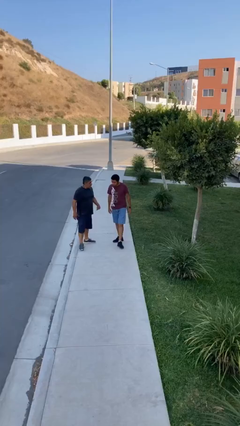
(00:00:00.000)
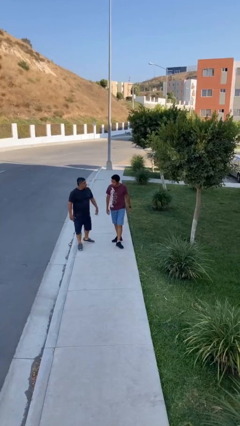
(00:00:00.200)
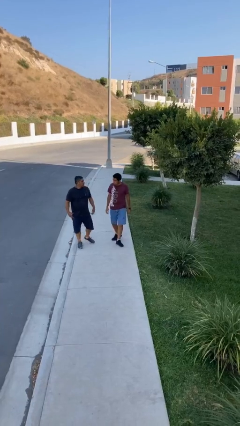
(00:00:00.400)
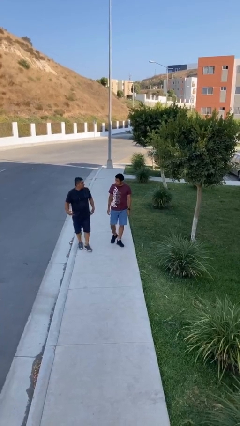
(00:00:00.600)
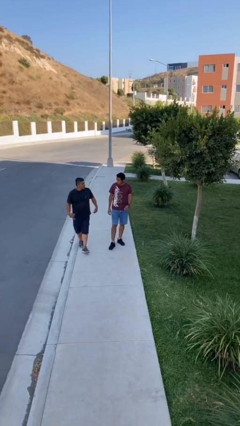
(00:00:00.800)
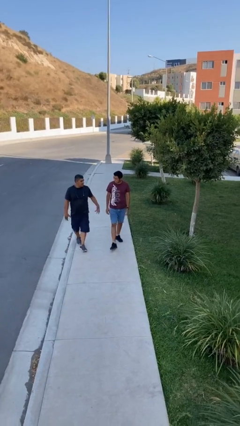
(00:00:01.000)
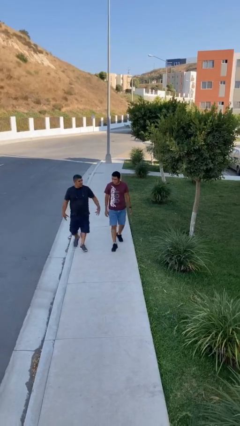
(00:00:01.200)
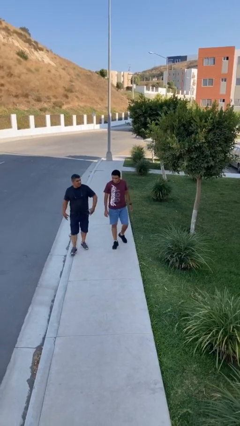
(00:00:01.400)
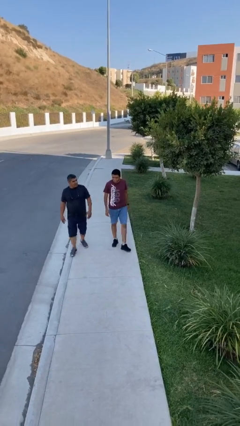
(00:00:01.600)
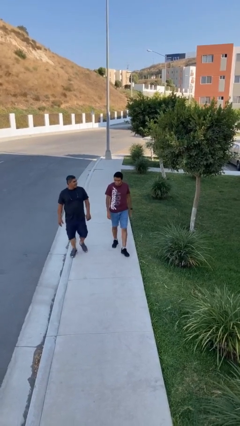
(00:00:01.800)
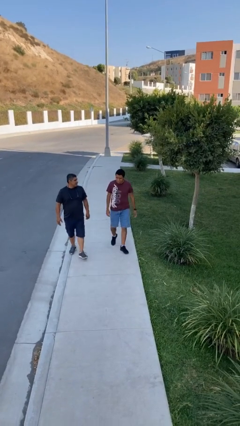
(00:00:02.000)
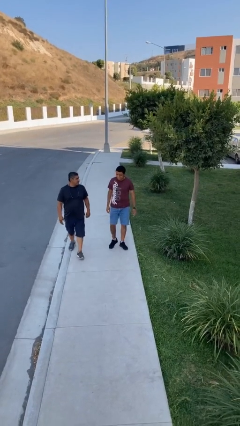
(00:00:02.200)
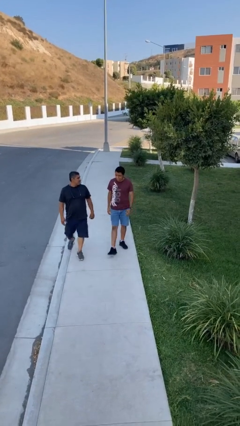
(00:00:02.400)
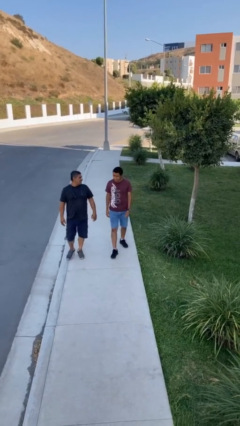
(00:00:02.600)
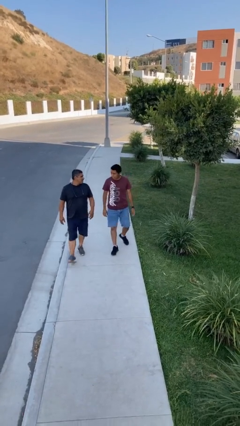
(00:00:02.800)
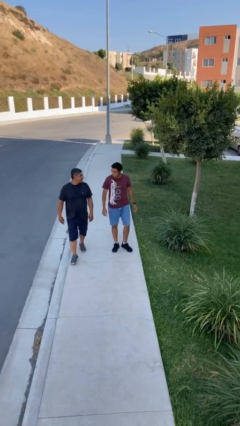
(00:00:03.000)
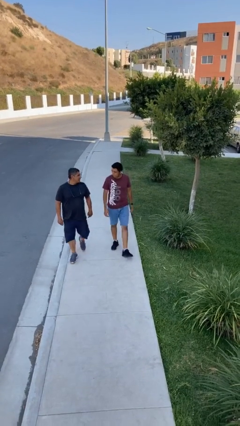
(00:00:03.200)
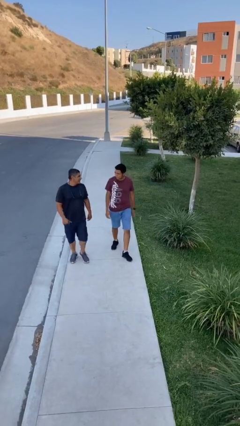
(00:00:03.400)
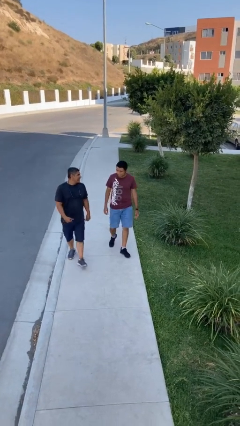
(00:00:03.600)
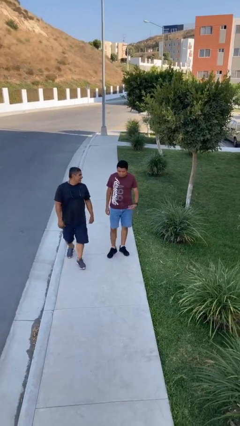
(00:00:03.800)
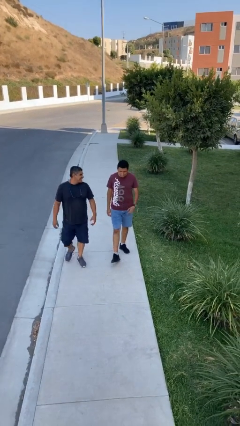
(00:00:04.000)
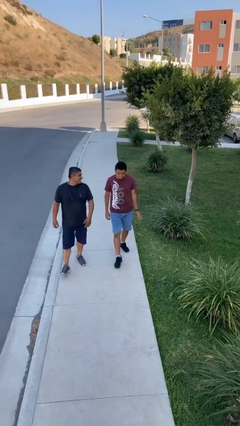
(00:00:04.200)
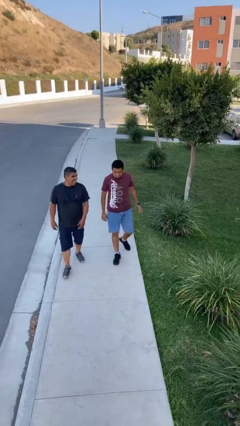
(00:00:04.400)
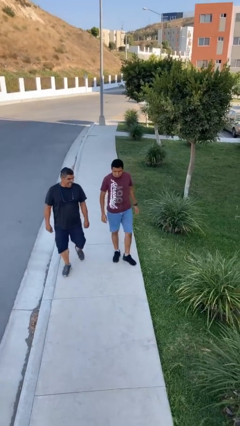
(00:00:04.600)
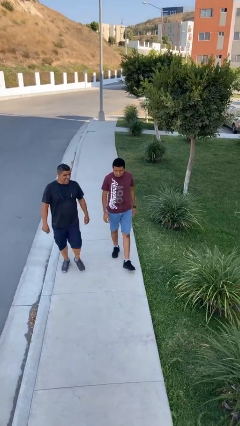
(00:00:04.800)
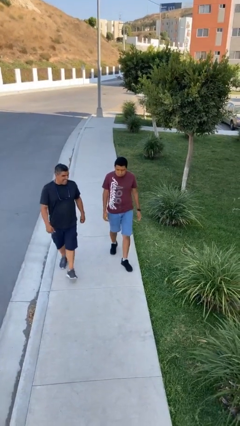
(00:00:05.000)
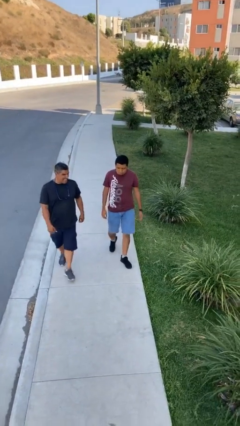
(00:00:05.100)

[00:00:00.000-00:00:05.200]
person talks to person

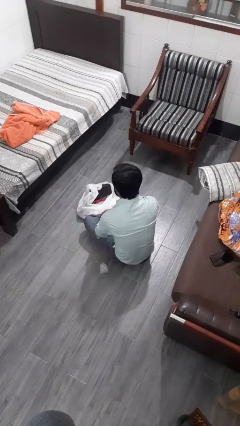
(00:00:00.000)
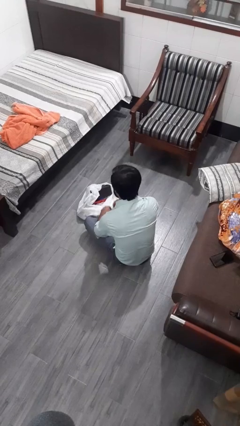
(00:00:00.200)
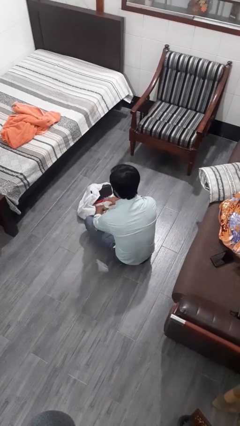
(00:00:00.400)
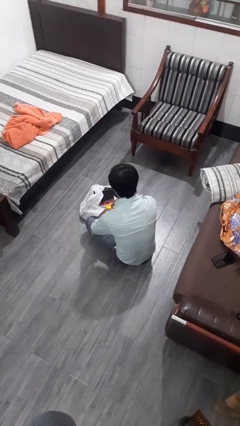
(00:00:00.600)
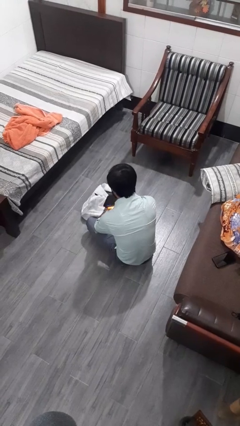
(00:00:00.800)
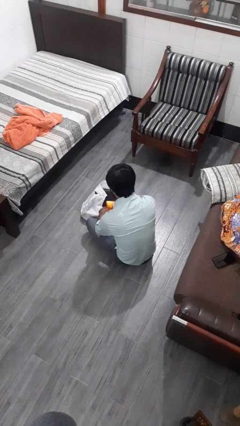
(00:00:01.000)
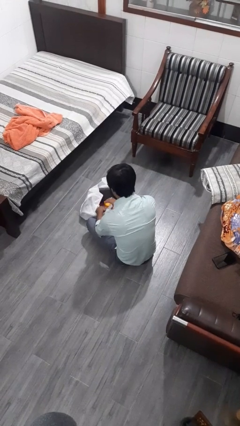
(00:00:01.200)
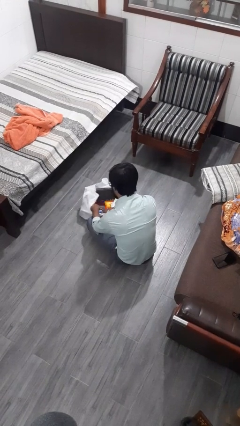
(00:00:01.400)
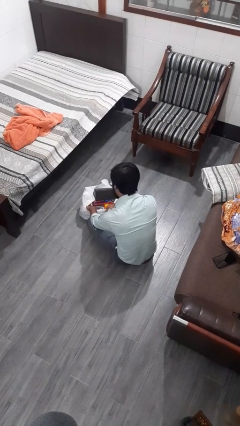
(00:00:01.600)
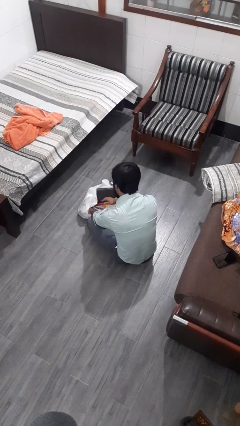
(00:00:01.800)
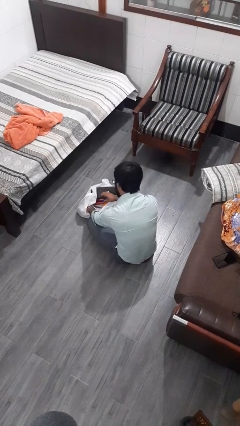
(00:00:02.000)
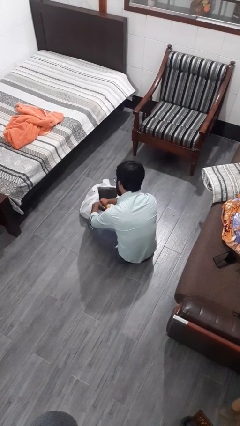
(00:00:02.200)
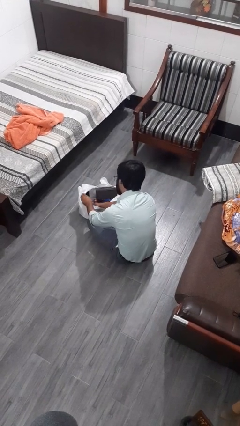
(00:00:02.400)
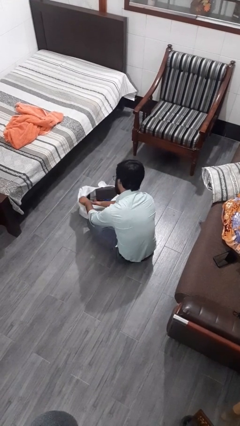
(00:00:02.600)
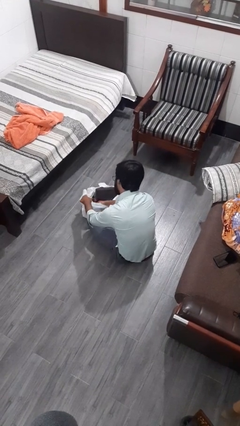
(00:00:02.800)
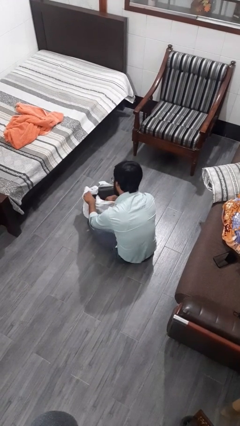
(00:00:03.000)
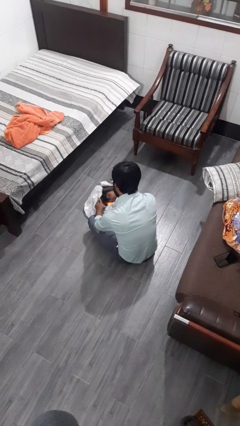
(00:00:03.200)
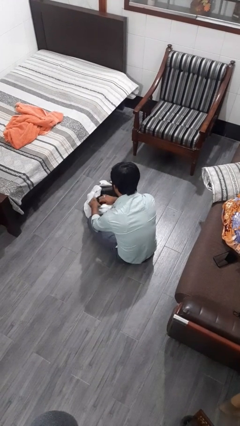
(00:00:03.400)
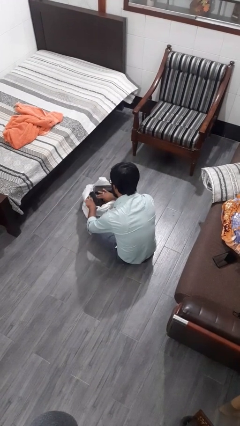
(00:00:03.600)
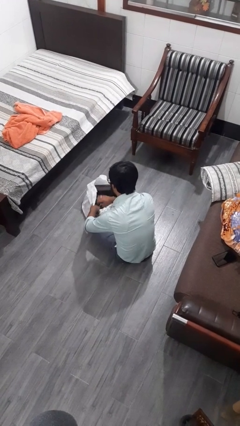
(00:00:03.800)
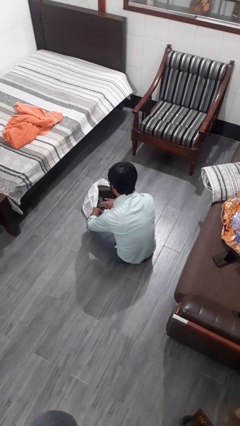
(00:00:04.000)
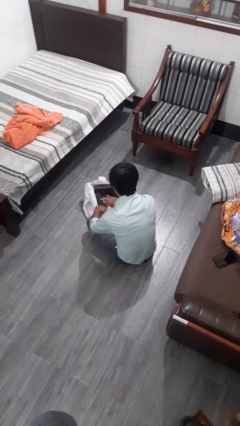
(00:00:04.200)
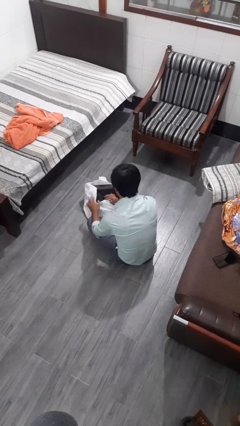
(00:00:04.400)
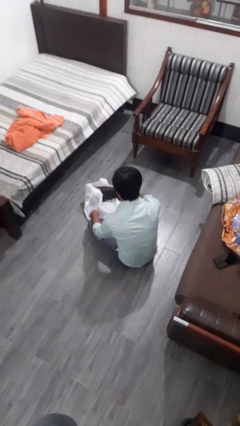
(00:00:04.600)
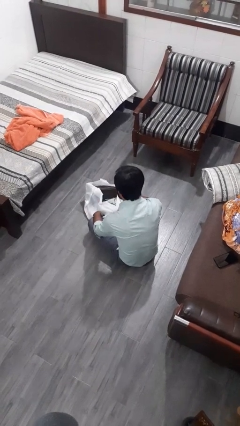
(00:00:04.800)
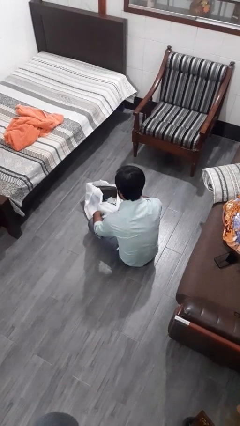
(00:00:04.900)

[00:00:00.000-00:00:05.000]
person searches in bag

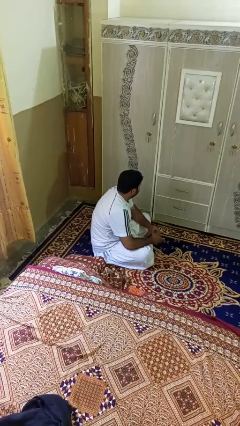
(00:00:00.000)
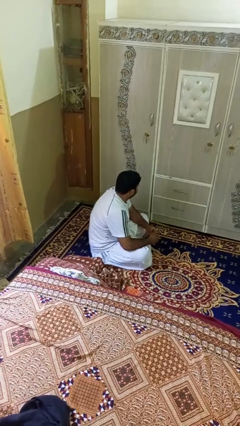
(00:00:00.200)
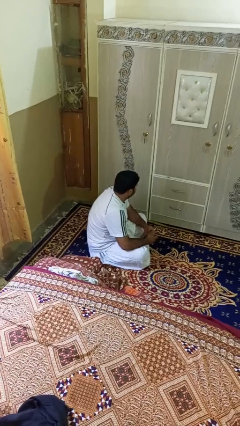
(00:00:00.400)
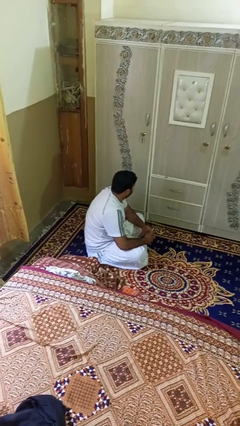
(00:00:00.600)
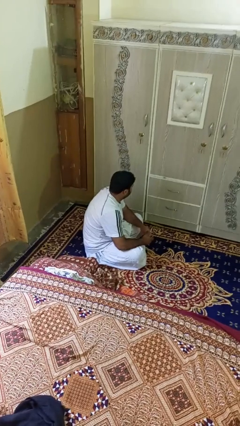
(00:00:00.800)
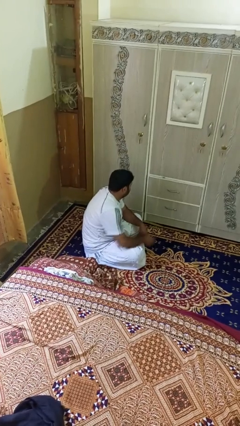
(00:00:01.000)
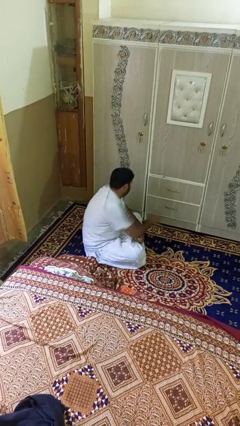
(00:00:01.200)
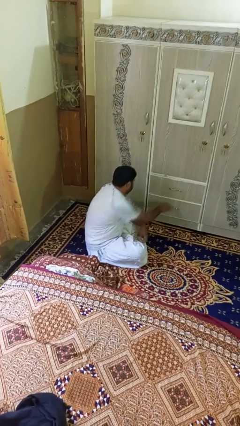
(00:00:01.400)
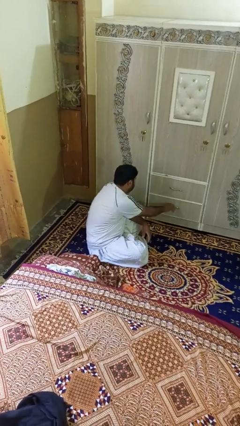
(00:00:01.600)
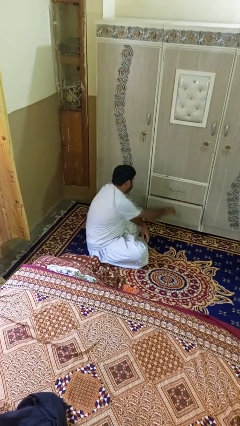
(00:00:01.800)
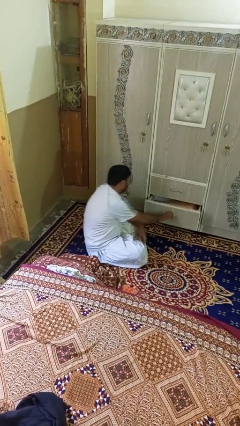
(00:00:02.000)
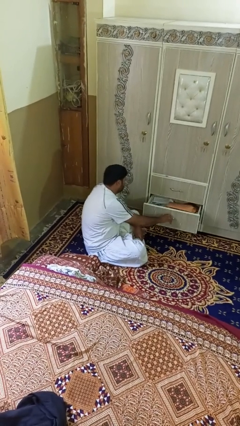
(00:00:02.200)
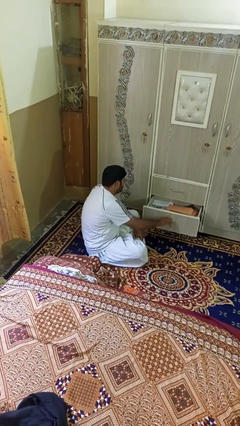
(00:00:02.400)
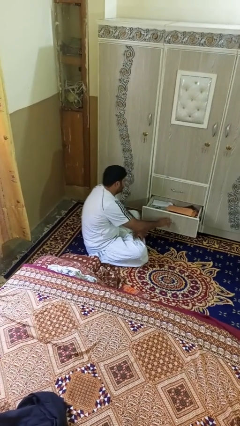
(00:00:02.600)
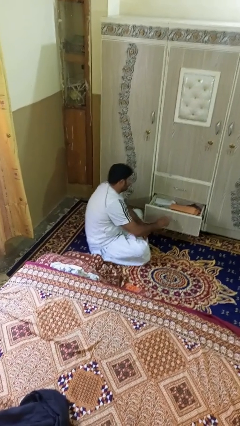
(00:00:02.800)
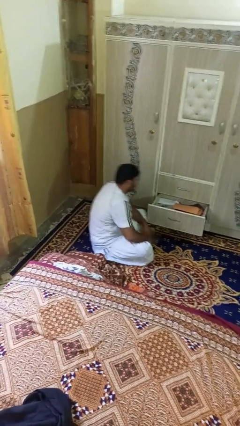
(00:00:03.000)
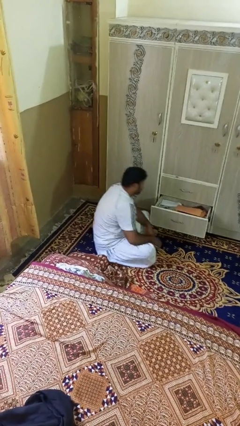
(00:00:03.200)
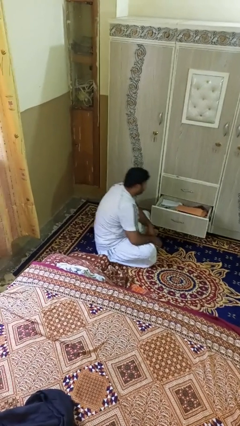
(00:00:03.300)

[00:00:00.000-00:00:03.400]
person opens dresser drawer

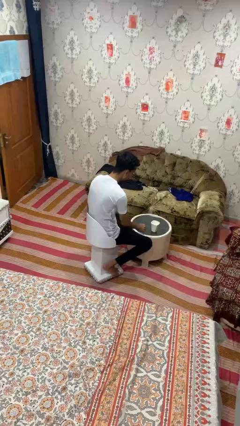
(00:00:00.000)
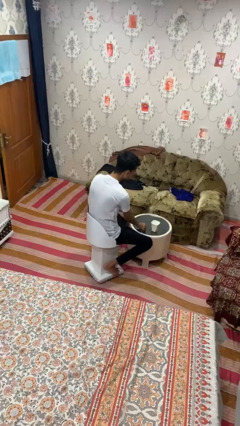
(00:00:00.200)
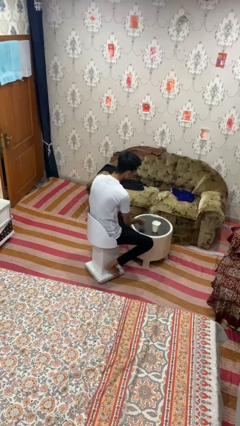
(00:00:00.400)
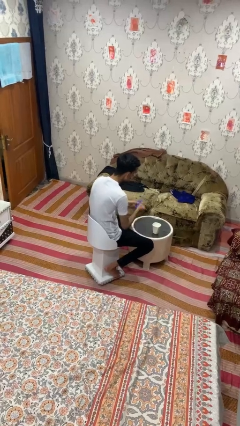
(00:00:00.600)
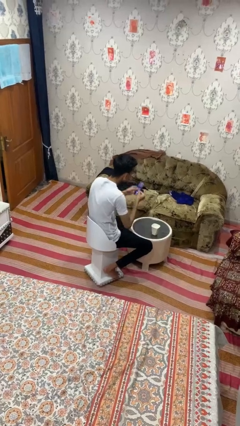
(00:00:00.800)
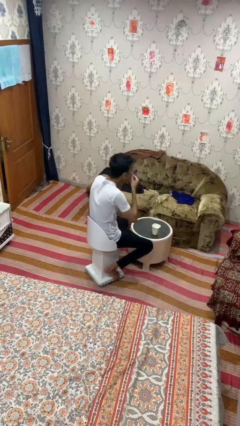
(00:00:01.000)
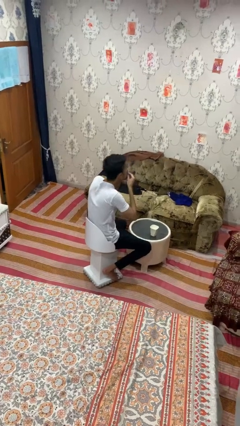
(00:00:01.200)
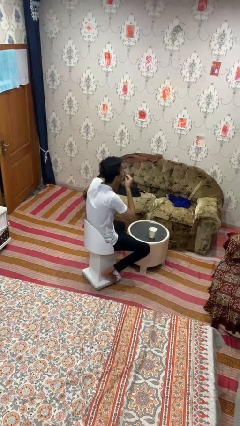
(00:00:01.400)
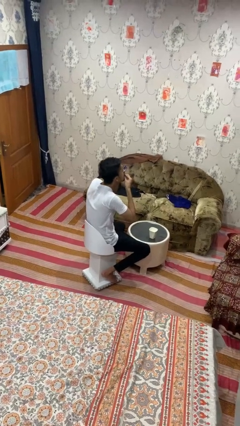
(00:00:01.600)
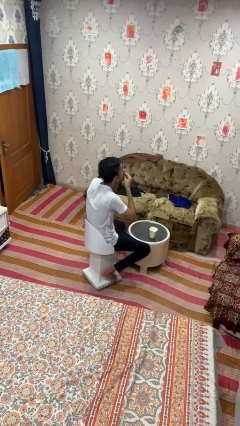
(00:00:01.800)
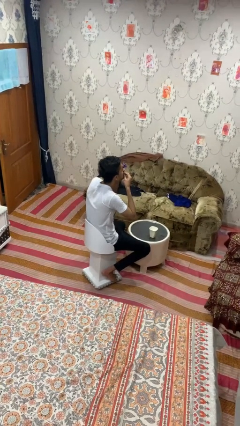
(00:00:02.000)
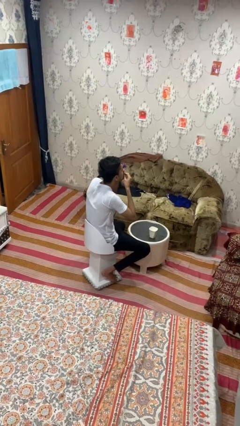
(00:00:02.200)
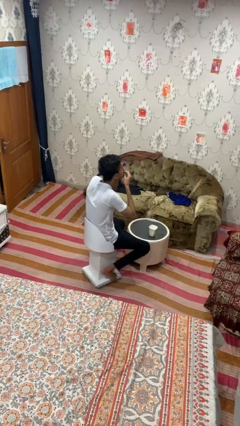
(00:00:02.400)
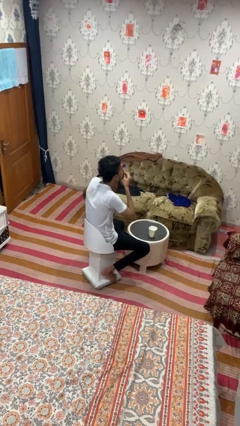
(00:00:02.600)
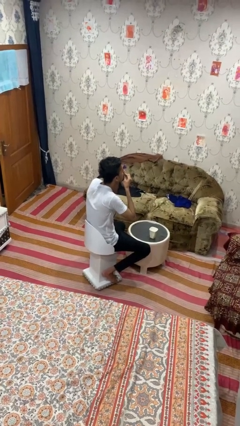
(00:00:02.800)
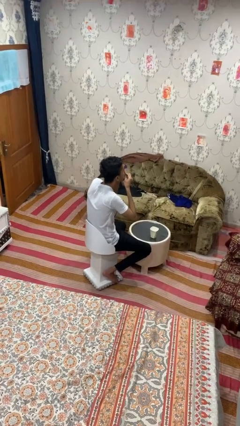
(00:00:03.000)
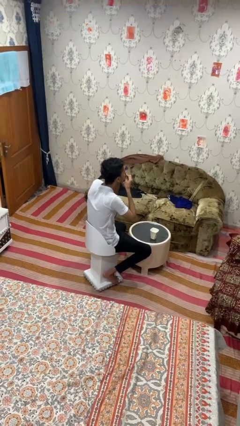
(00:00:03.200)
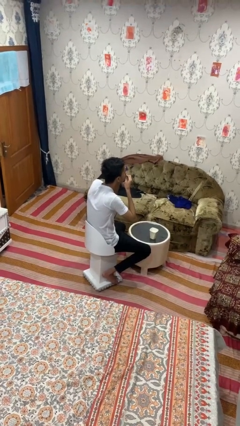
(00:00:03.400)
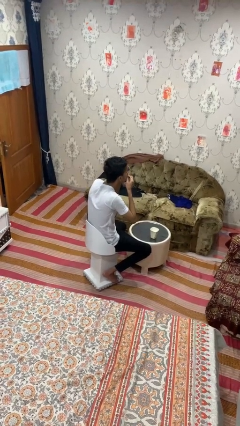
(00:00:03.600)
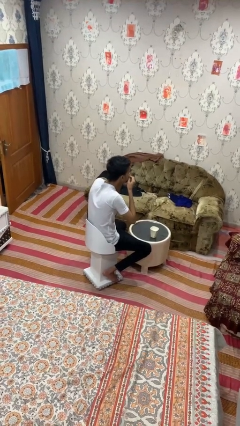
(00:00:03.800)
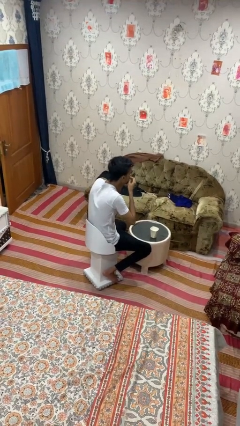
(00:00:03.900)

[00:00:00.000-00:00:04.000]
person takes medicine pills
